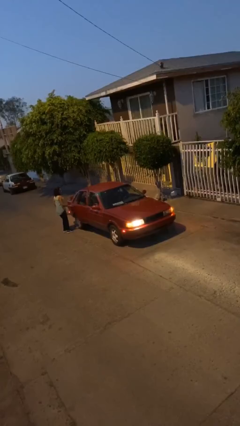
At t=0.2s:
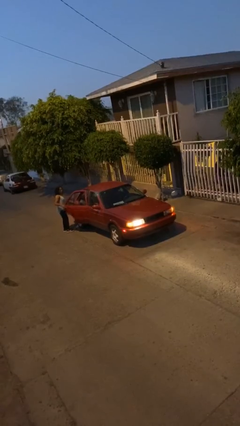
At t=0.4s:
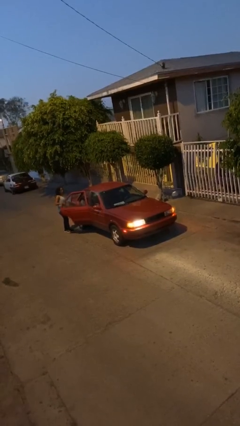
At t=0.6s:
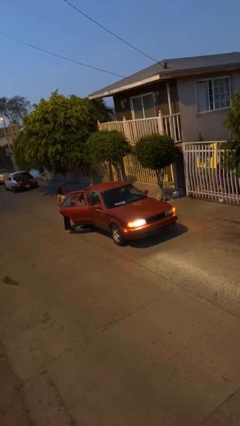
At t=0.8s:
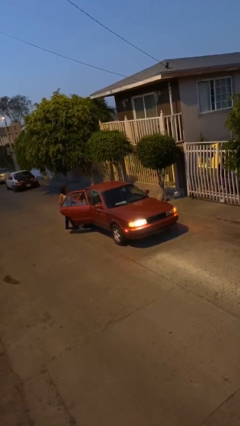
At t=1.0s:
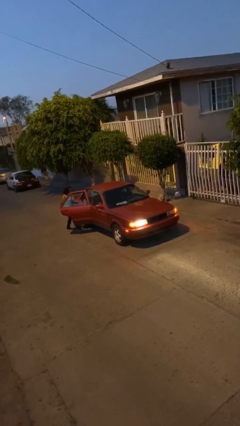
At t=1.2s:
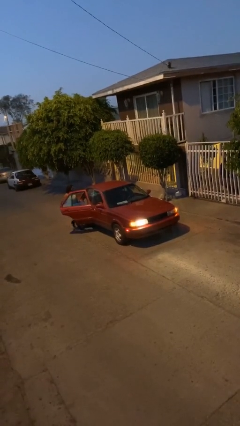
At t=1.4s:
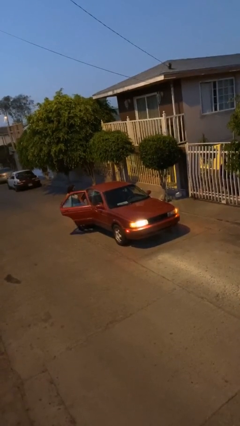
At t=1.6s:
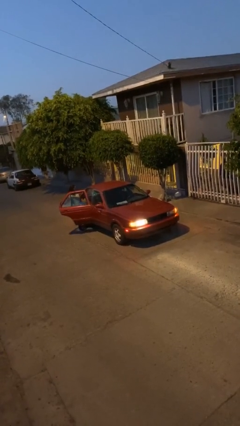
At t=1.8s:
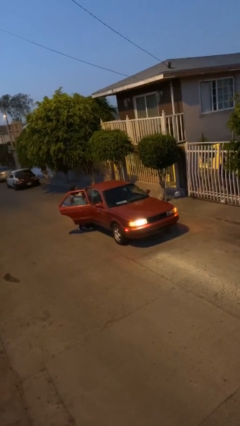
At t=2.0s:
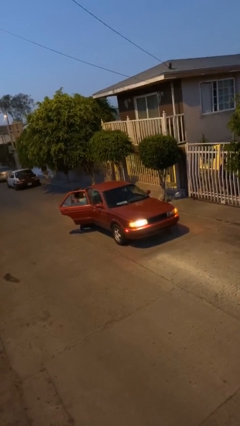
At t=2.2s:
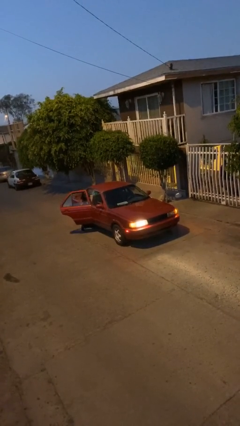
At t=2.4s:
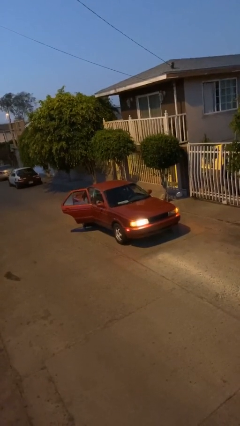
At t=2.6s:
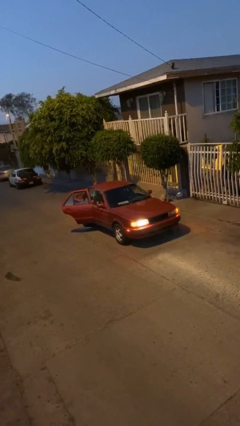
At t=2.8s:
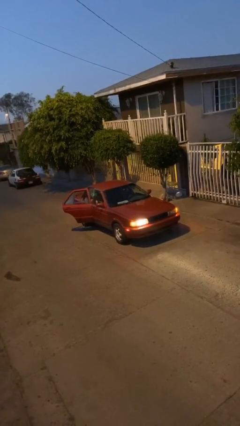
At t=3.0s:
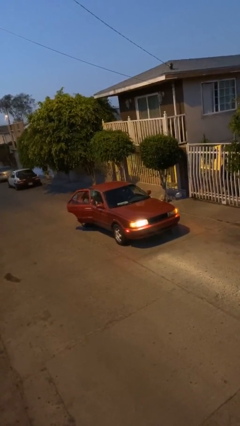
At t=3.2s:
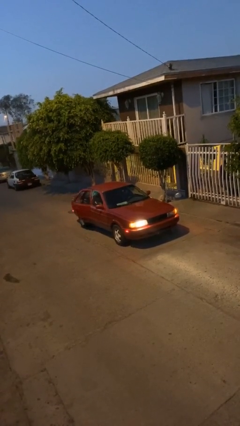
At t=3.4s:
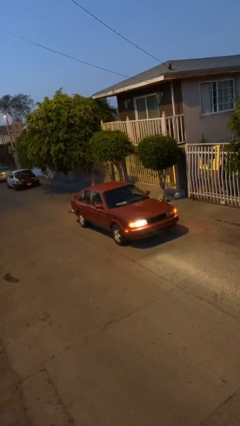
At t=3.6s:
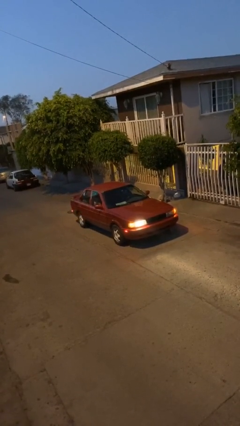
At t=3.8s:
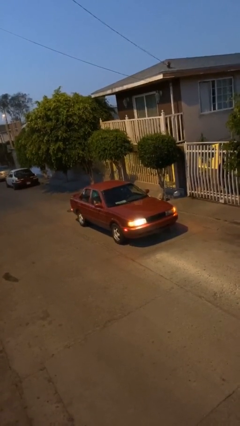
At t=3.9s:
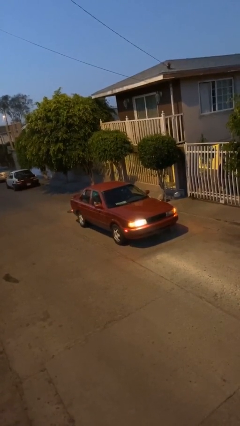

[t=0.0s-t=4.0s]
car picks up person

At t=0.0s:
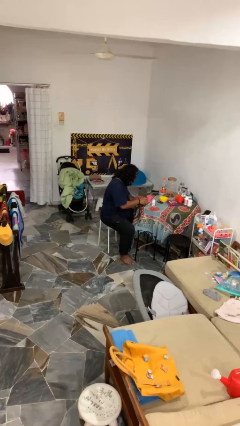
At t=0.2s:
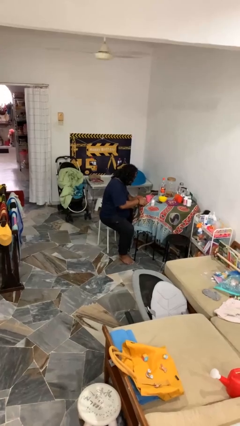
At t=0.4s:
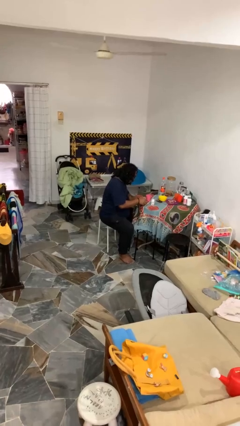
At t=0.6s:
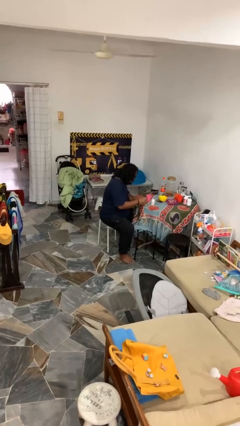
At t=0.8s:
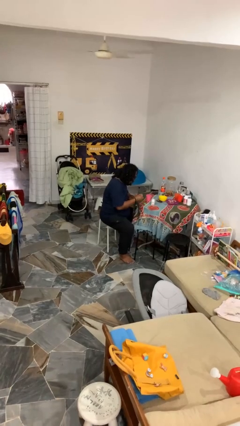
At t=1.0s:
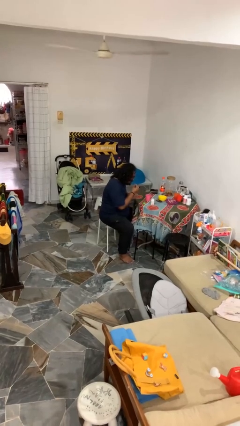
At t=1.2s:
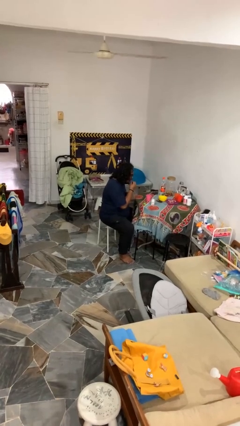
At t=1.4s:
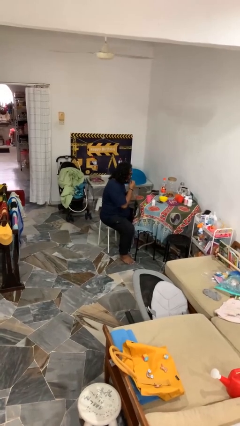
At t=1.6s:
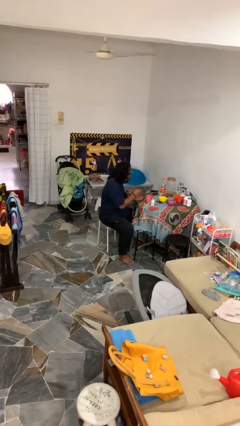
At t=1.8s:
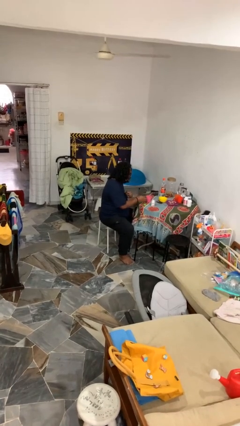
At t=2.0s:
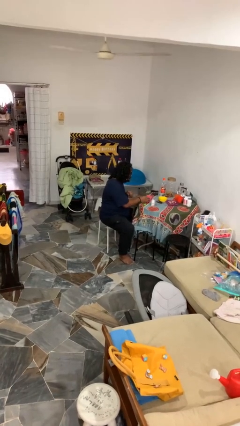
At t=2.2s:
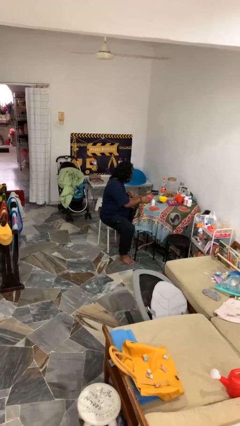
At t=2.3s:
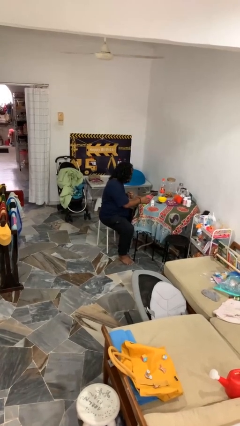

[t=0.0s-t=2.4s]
person takes medicine pills

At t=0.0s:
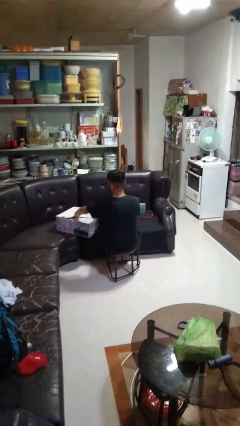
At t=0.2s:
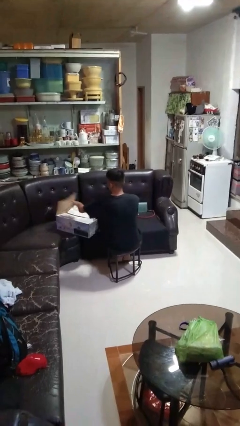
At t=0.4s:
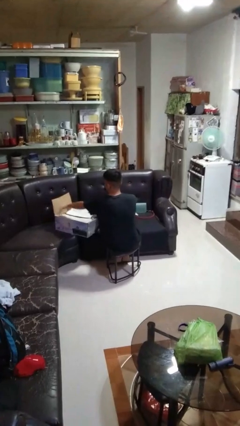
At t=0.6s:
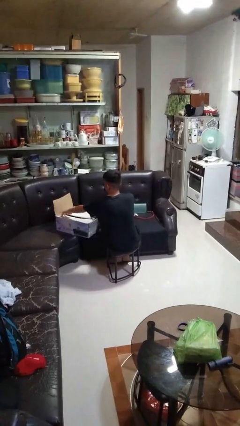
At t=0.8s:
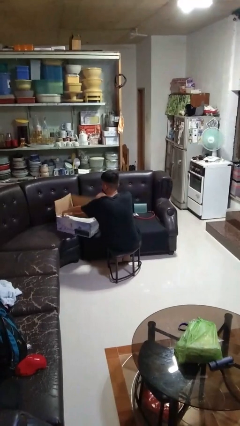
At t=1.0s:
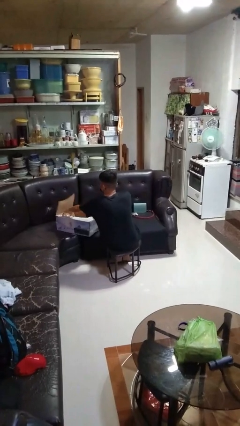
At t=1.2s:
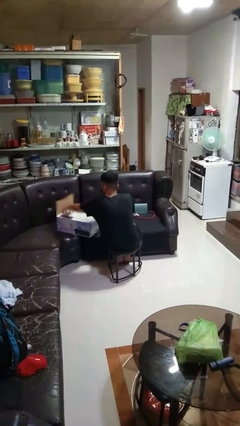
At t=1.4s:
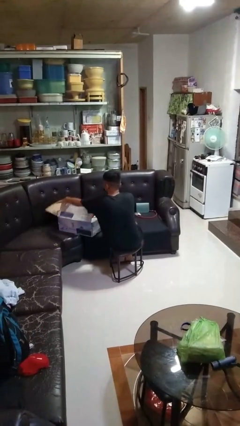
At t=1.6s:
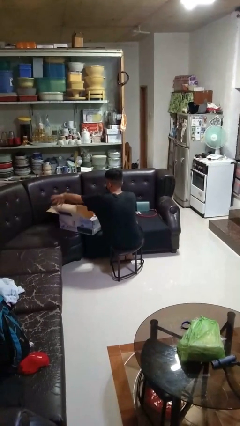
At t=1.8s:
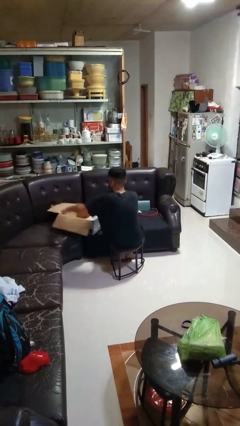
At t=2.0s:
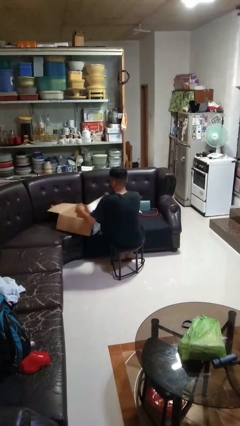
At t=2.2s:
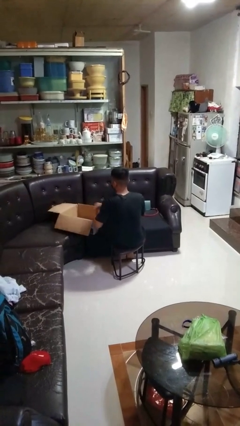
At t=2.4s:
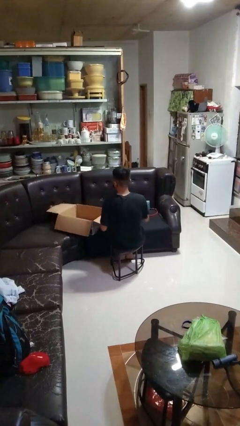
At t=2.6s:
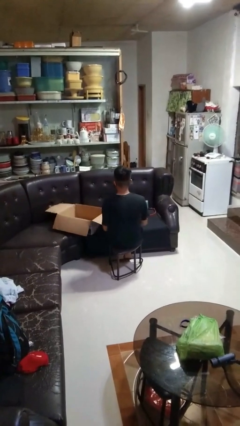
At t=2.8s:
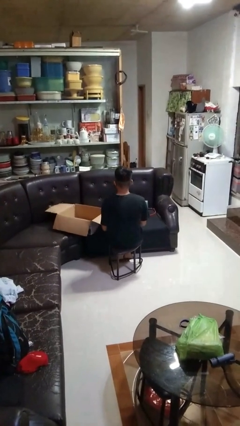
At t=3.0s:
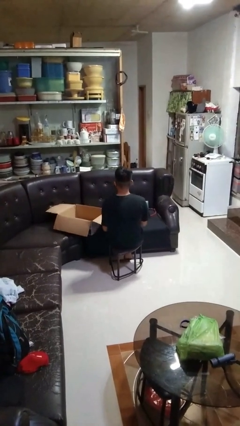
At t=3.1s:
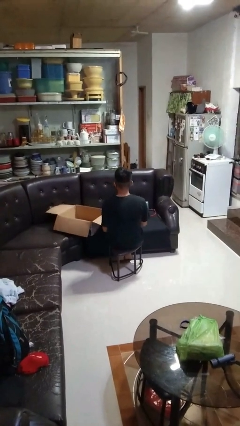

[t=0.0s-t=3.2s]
person opens box

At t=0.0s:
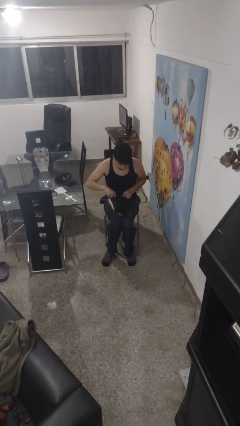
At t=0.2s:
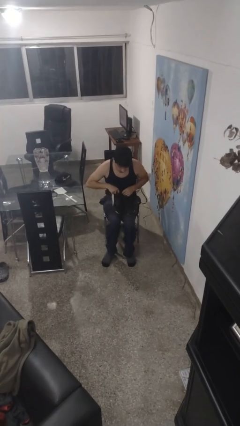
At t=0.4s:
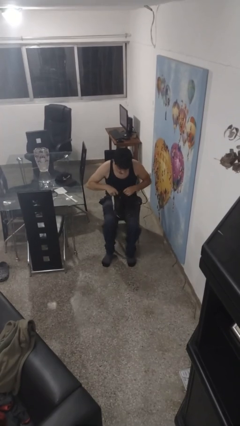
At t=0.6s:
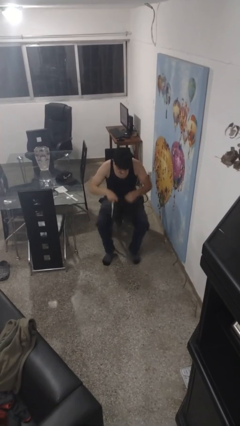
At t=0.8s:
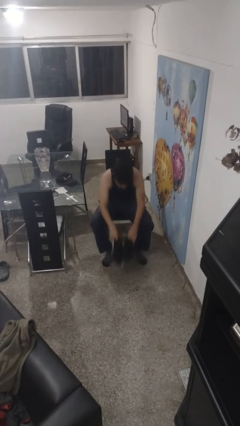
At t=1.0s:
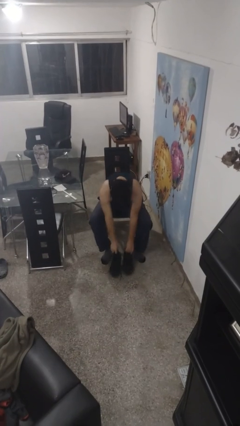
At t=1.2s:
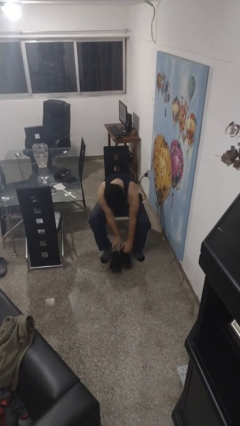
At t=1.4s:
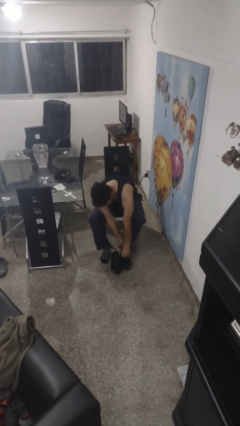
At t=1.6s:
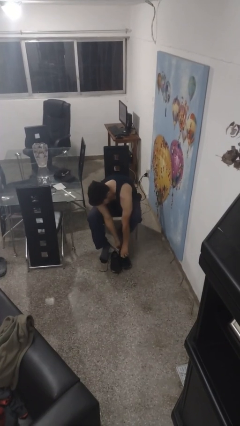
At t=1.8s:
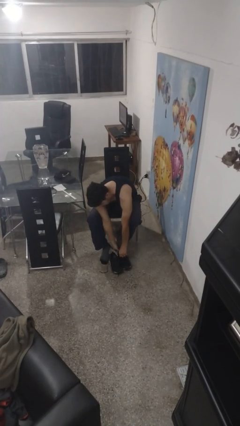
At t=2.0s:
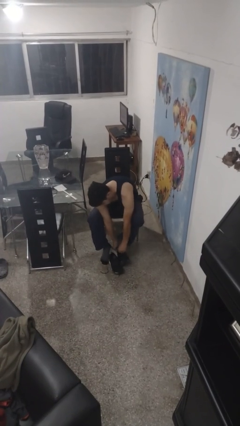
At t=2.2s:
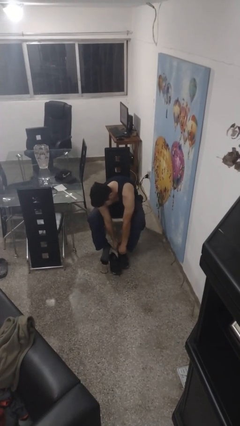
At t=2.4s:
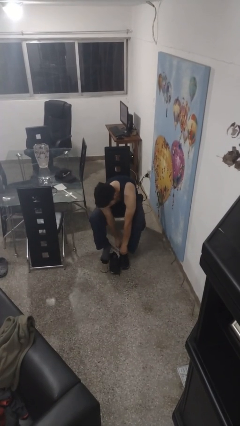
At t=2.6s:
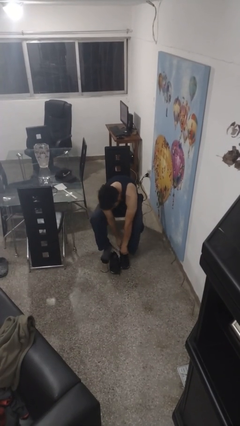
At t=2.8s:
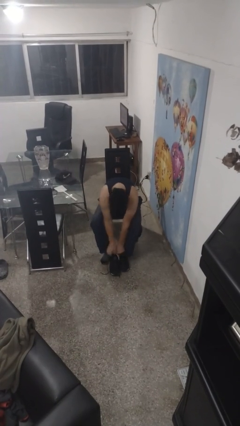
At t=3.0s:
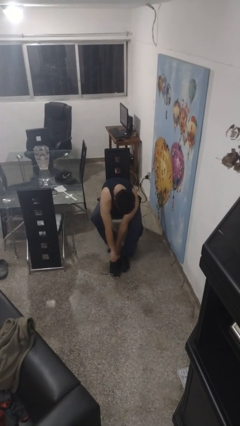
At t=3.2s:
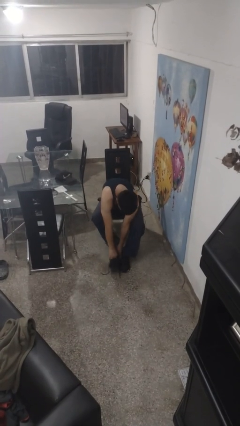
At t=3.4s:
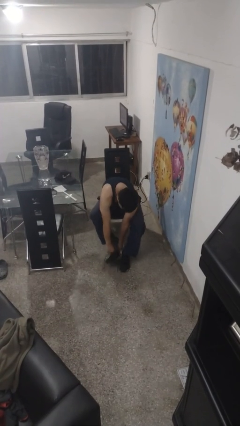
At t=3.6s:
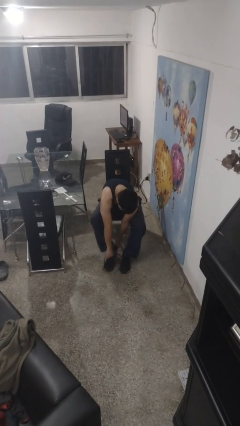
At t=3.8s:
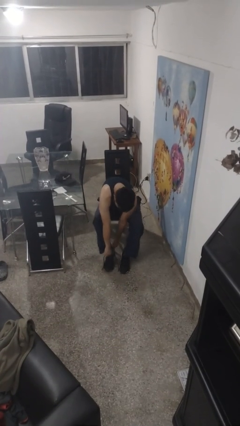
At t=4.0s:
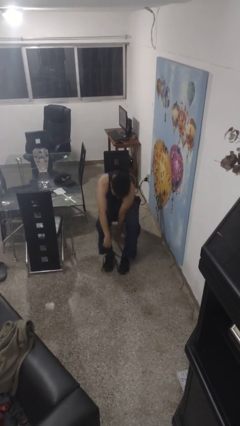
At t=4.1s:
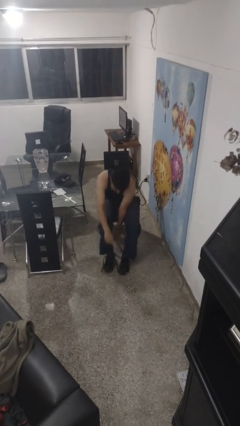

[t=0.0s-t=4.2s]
person puts on shoes

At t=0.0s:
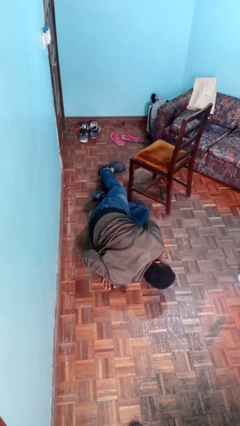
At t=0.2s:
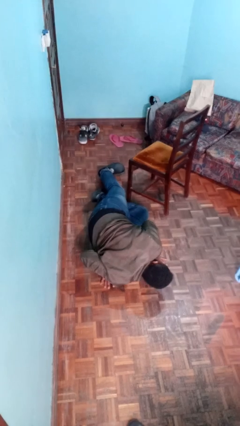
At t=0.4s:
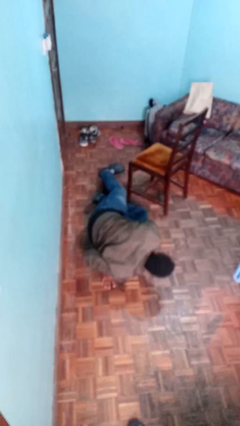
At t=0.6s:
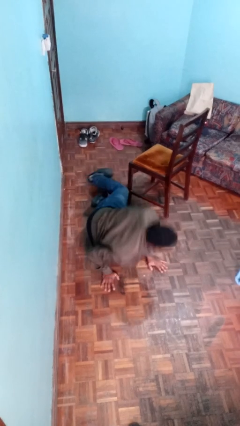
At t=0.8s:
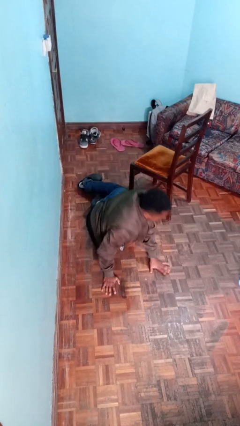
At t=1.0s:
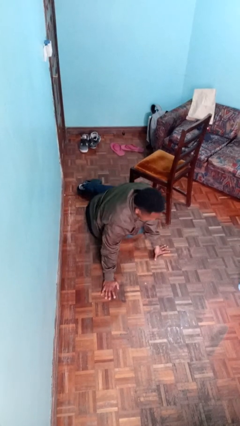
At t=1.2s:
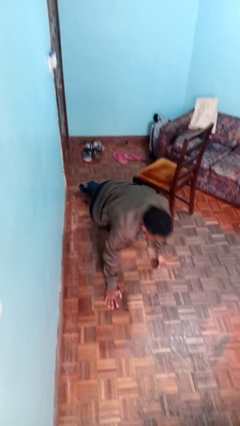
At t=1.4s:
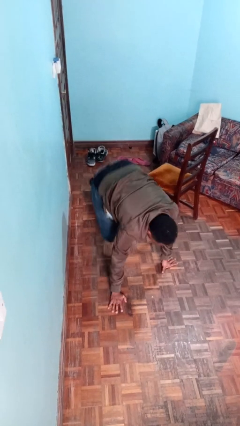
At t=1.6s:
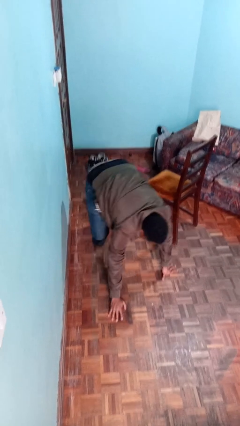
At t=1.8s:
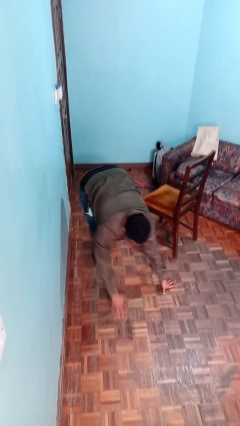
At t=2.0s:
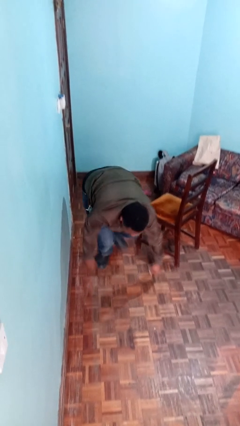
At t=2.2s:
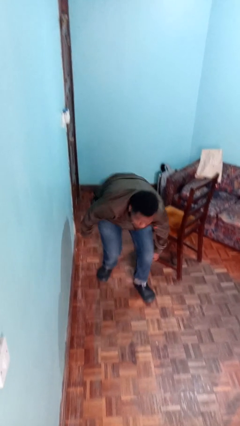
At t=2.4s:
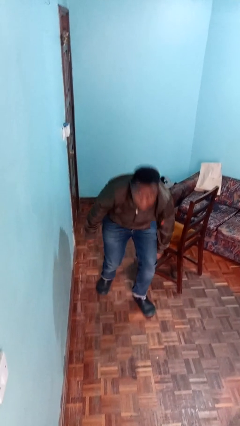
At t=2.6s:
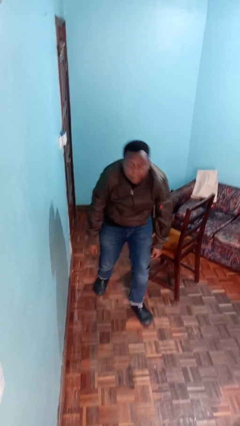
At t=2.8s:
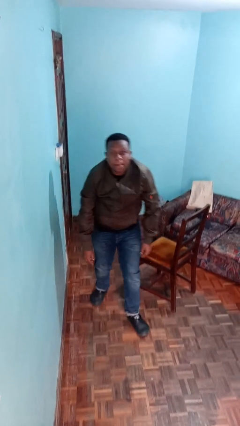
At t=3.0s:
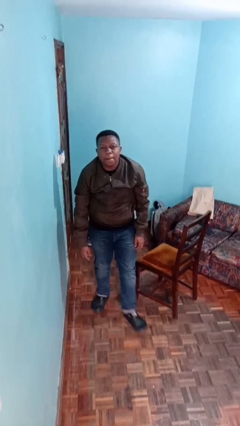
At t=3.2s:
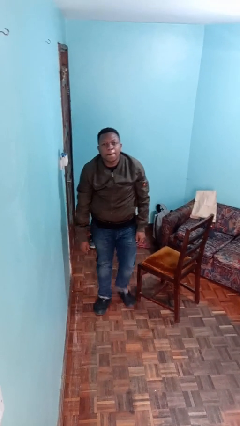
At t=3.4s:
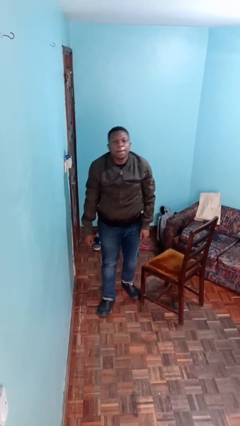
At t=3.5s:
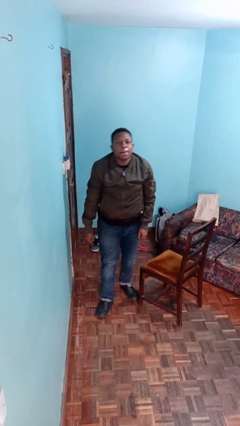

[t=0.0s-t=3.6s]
person stands up from floor
